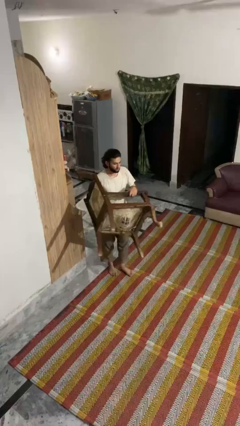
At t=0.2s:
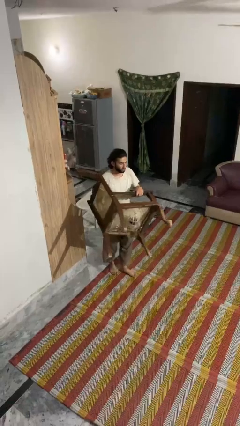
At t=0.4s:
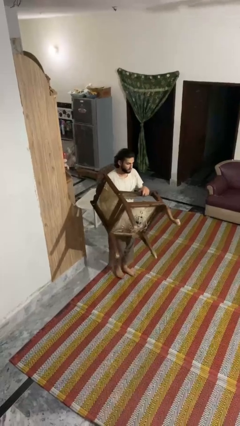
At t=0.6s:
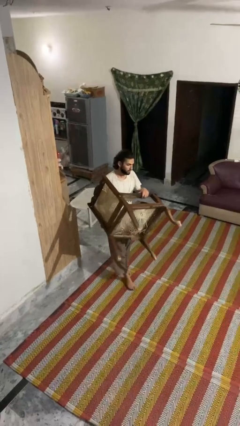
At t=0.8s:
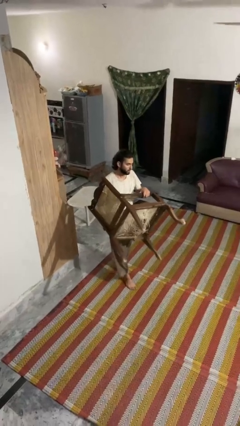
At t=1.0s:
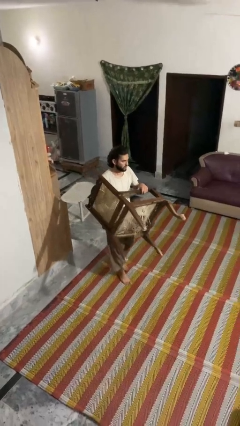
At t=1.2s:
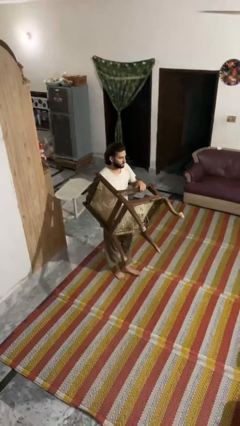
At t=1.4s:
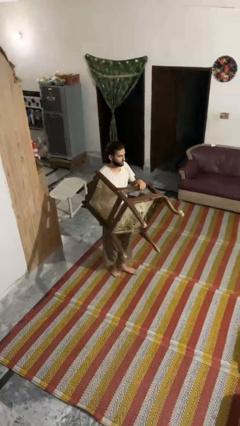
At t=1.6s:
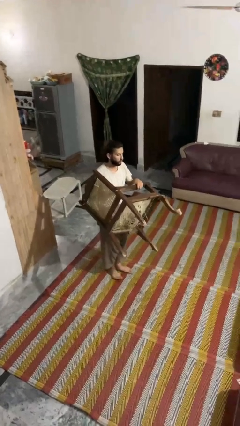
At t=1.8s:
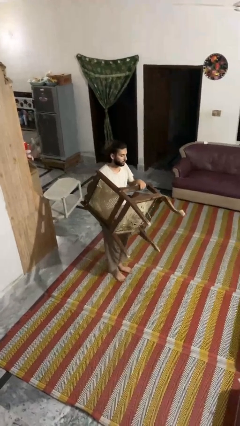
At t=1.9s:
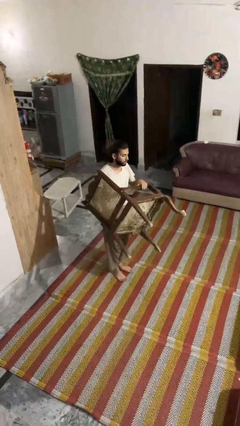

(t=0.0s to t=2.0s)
person carries furniture

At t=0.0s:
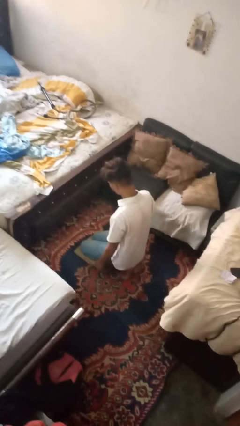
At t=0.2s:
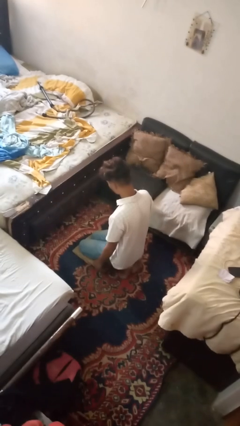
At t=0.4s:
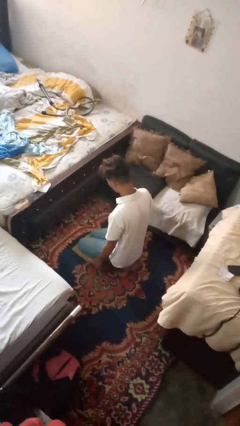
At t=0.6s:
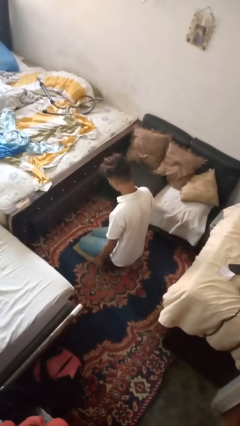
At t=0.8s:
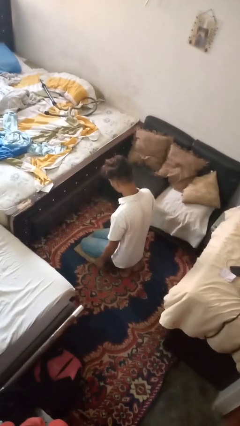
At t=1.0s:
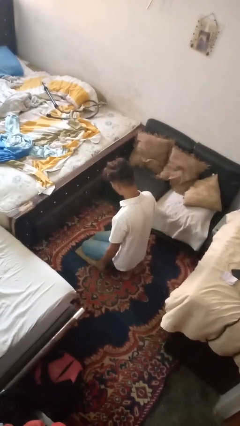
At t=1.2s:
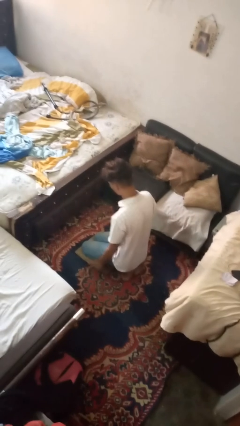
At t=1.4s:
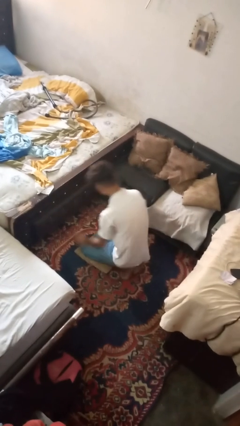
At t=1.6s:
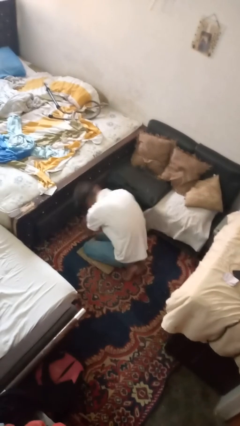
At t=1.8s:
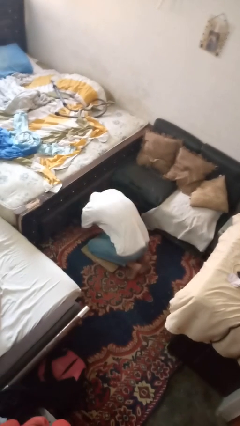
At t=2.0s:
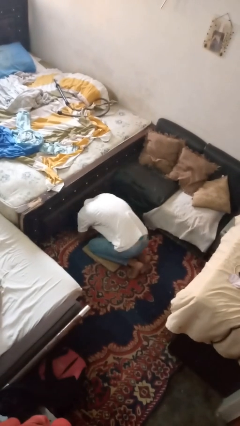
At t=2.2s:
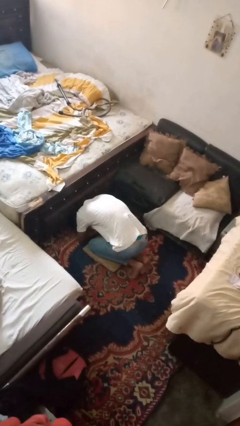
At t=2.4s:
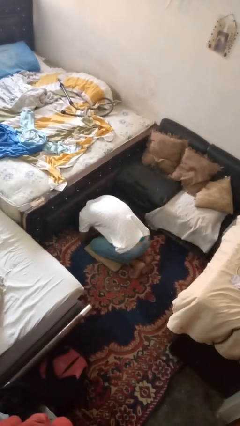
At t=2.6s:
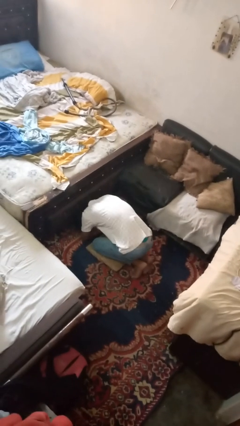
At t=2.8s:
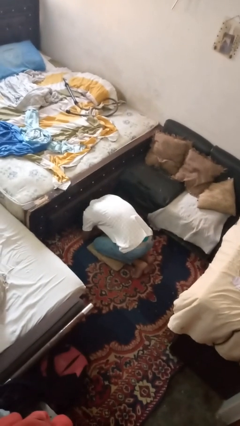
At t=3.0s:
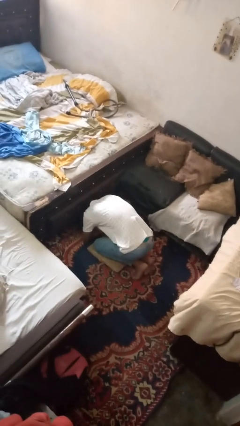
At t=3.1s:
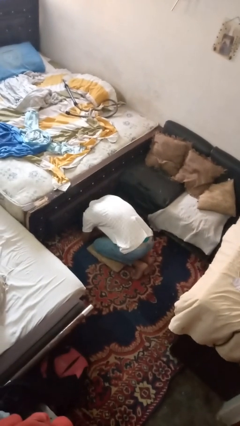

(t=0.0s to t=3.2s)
person searches under bed

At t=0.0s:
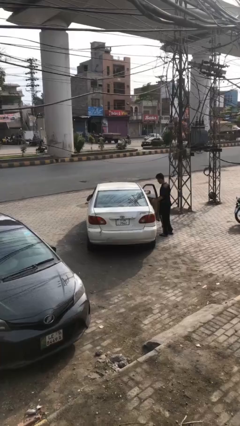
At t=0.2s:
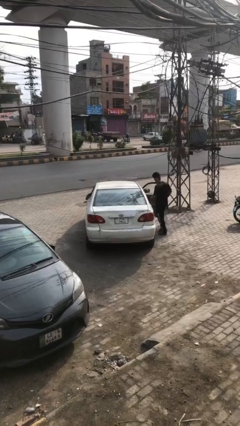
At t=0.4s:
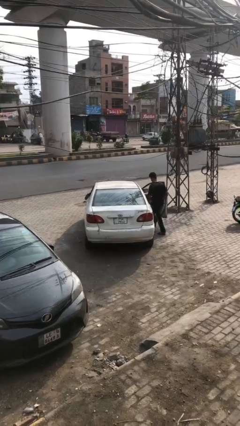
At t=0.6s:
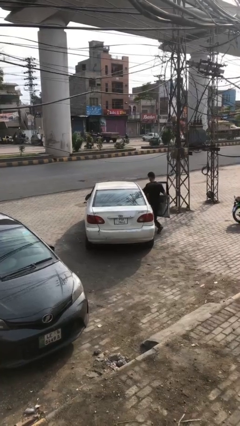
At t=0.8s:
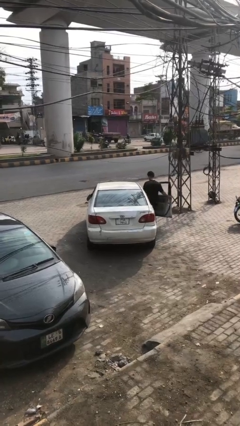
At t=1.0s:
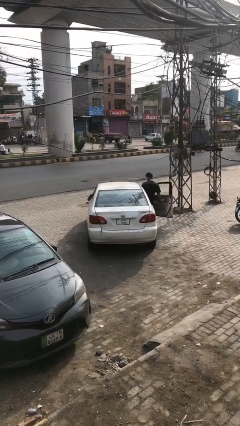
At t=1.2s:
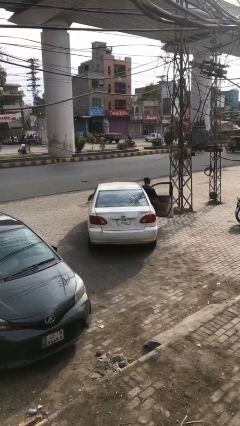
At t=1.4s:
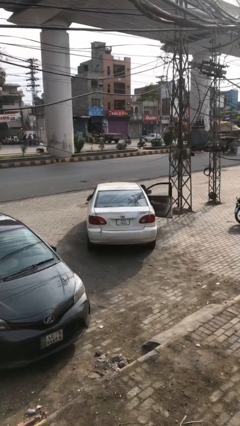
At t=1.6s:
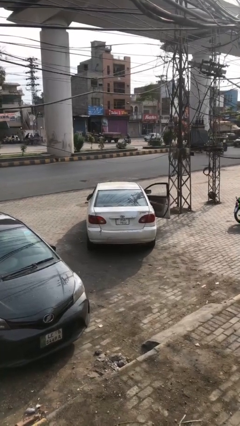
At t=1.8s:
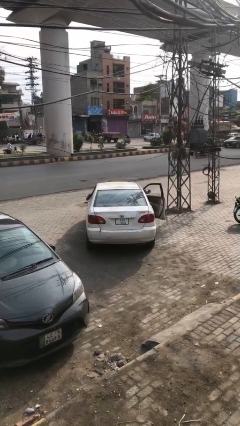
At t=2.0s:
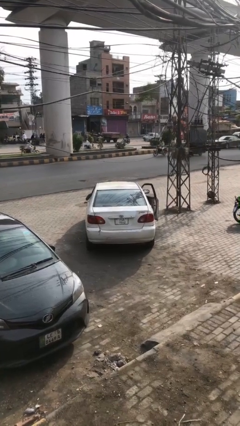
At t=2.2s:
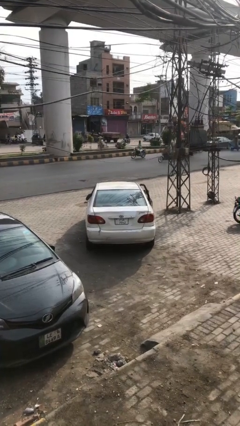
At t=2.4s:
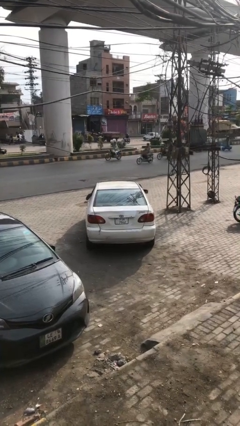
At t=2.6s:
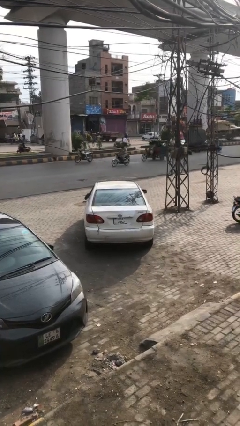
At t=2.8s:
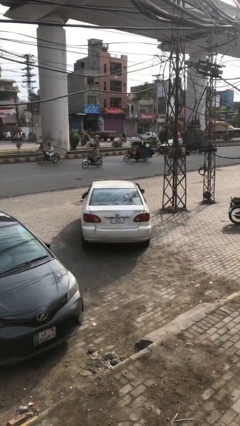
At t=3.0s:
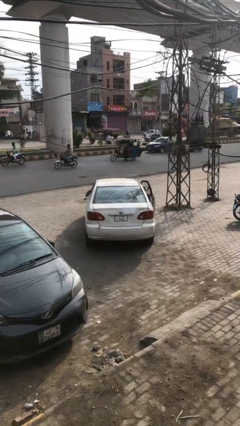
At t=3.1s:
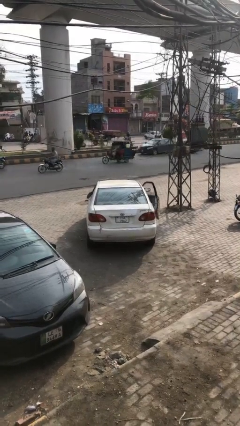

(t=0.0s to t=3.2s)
car picks up person

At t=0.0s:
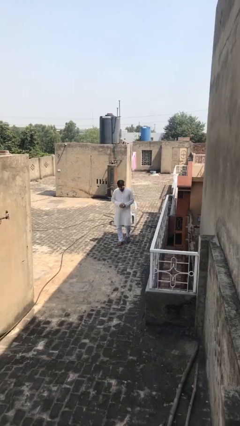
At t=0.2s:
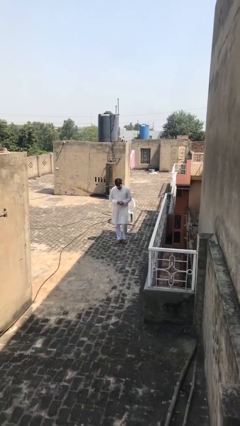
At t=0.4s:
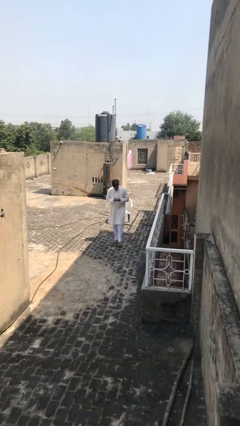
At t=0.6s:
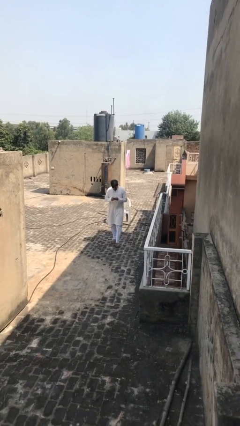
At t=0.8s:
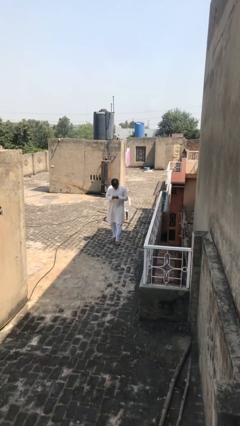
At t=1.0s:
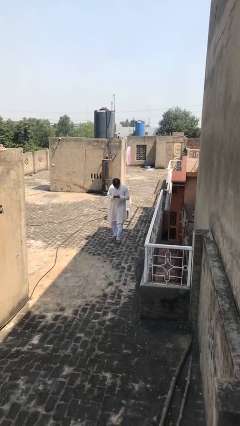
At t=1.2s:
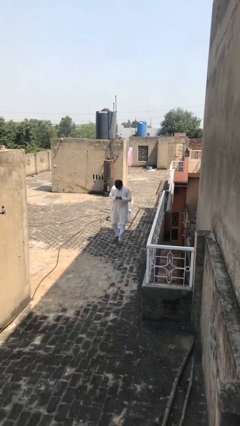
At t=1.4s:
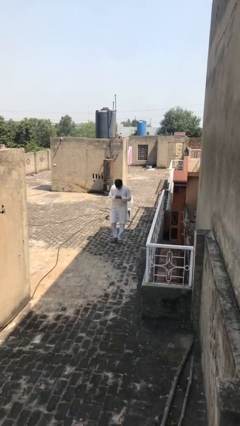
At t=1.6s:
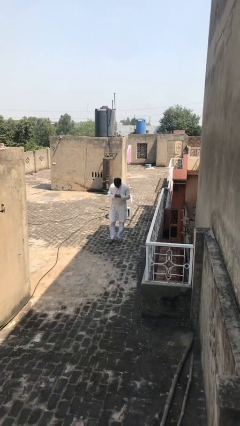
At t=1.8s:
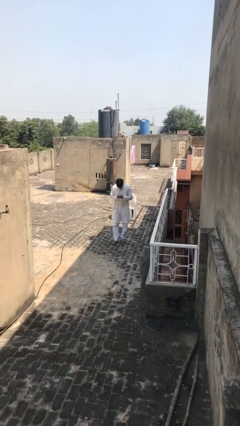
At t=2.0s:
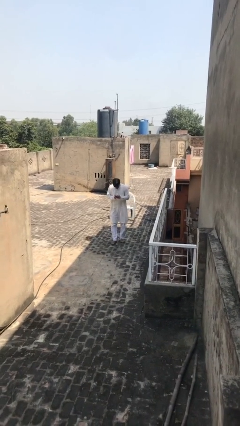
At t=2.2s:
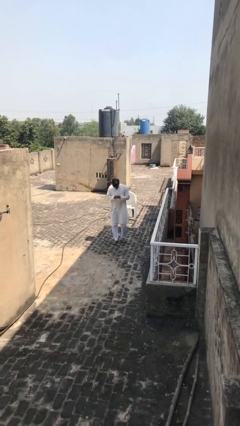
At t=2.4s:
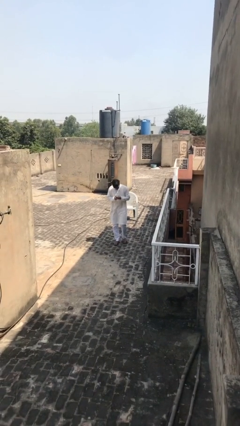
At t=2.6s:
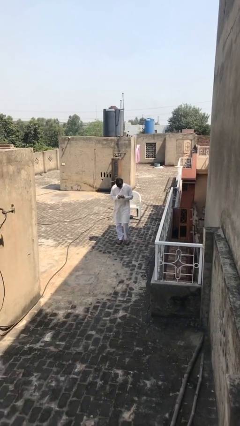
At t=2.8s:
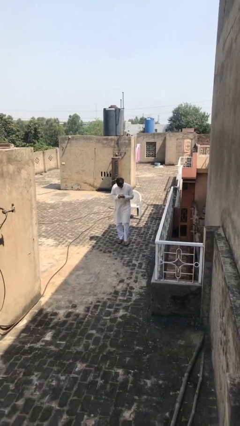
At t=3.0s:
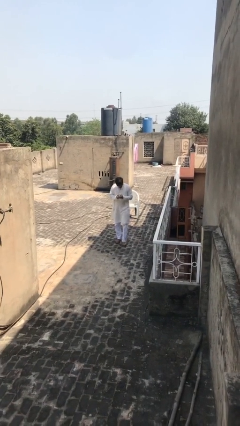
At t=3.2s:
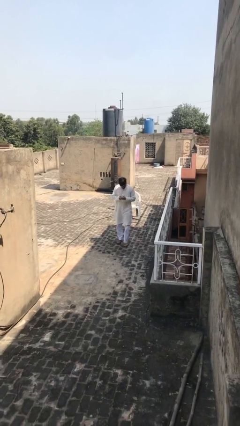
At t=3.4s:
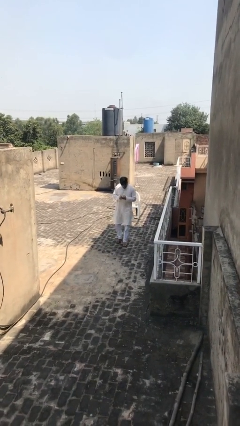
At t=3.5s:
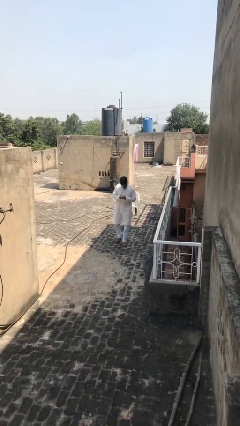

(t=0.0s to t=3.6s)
person texts on phone

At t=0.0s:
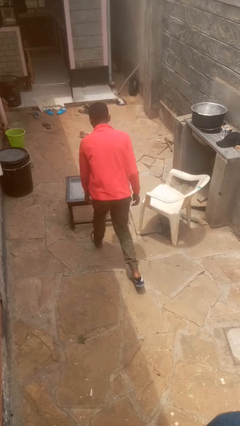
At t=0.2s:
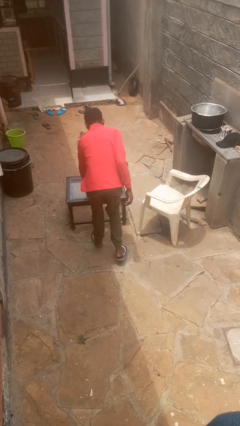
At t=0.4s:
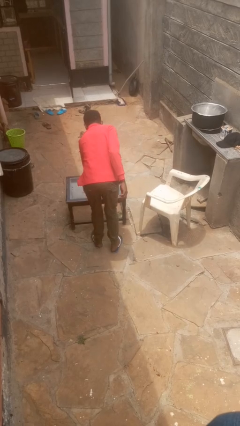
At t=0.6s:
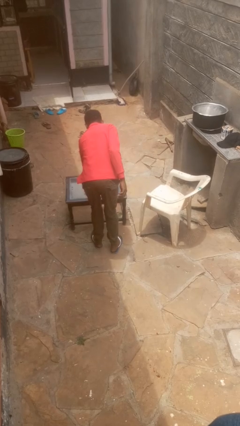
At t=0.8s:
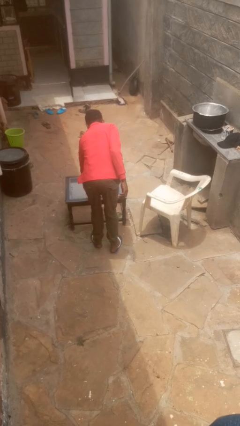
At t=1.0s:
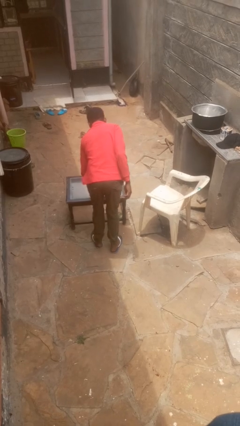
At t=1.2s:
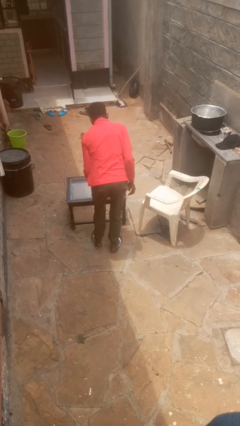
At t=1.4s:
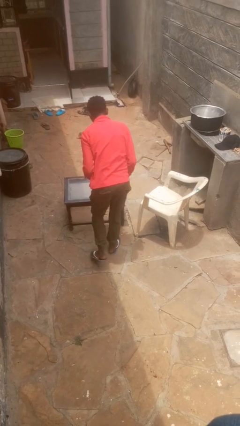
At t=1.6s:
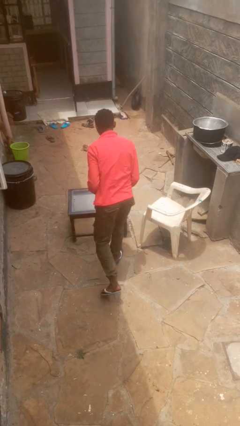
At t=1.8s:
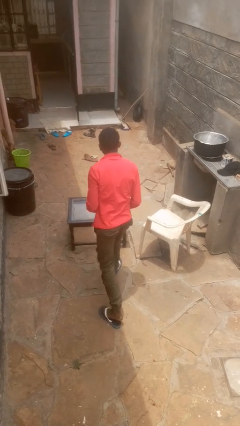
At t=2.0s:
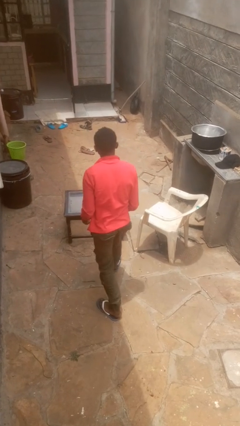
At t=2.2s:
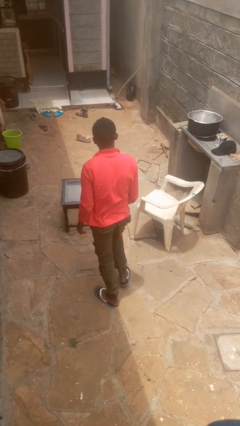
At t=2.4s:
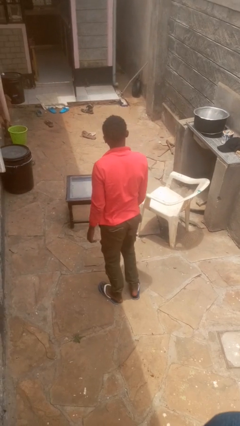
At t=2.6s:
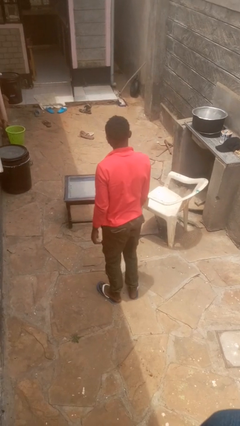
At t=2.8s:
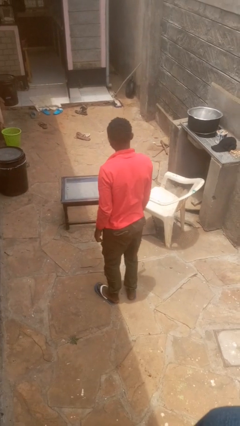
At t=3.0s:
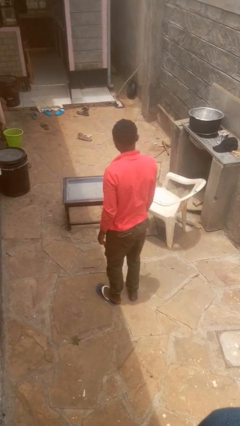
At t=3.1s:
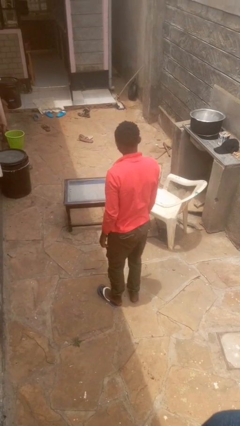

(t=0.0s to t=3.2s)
person picks up object from table

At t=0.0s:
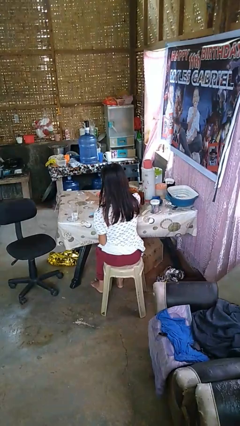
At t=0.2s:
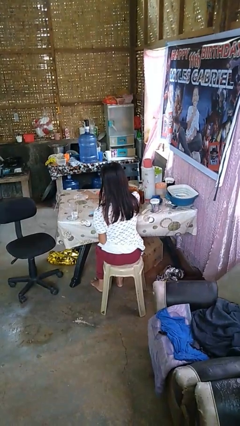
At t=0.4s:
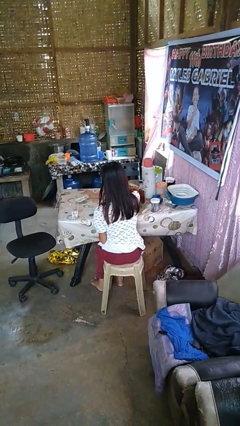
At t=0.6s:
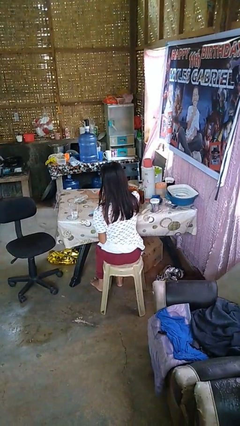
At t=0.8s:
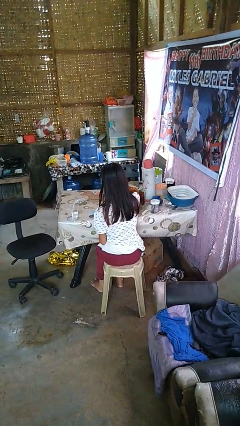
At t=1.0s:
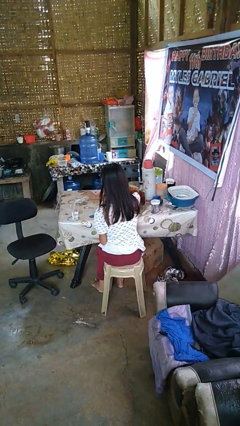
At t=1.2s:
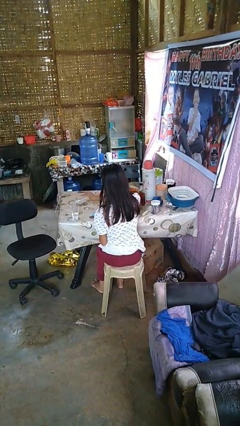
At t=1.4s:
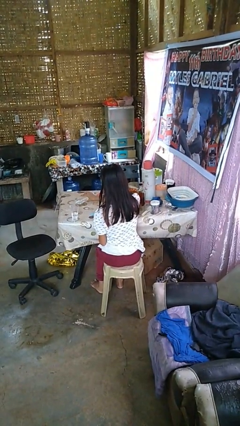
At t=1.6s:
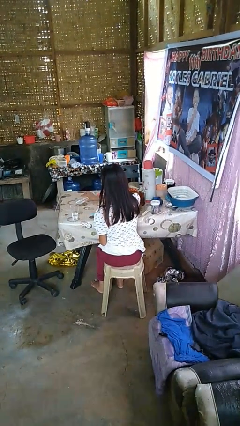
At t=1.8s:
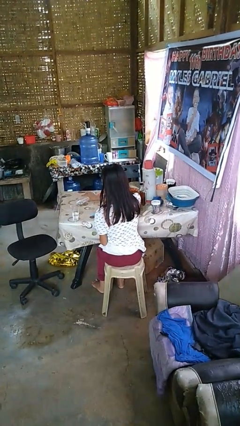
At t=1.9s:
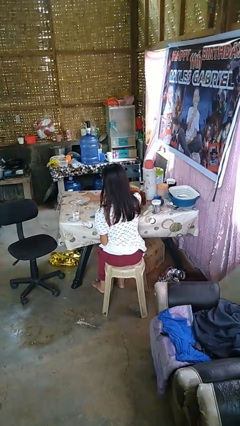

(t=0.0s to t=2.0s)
person pours liquid into cup
